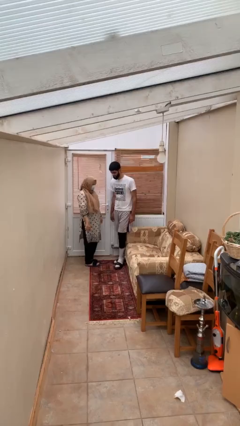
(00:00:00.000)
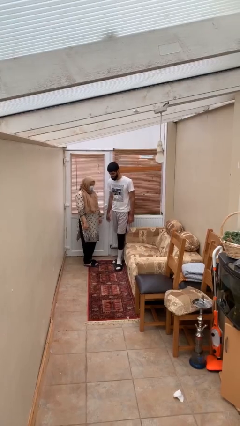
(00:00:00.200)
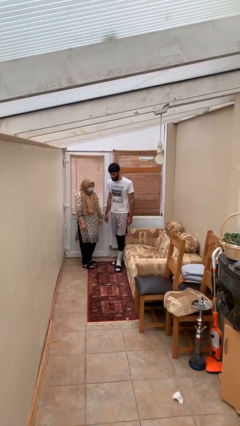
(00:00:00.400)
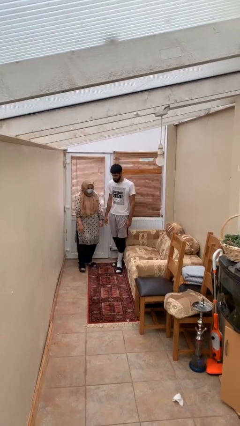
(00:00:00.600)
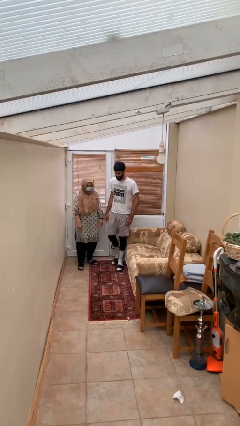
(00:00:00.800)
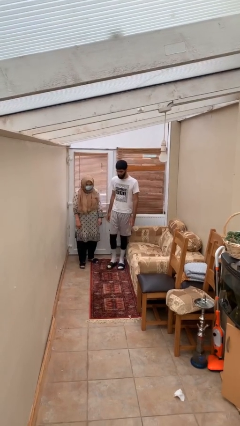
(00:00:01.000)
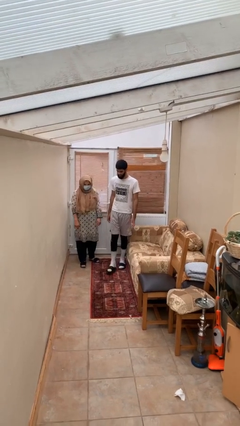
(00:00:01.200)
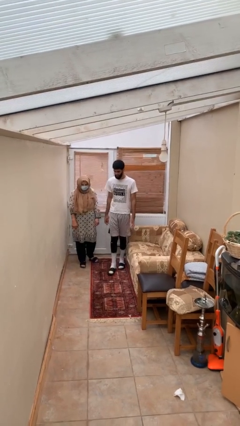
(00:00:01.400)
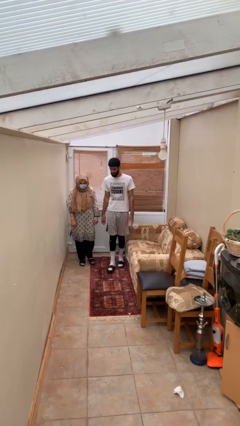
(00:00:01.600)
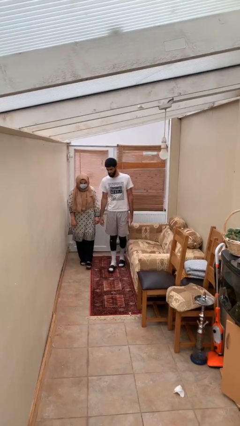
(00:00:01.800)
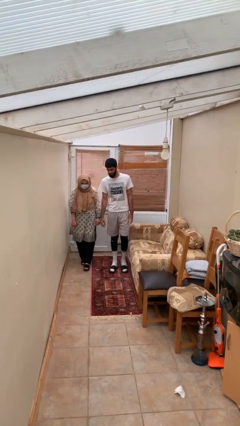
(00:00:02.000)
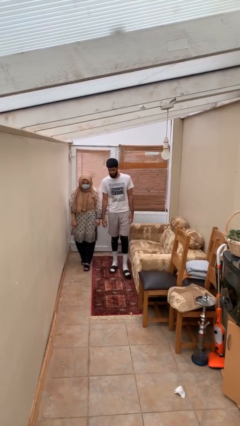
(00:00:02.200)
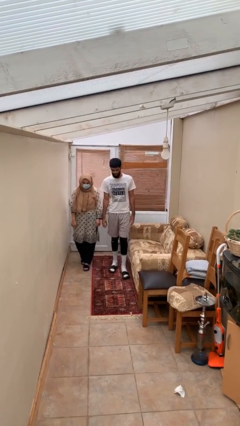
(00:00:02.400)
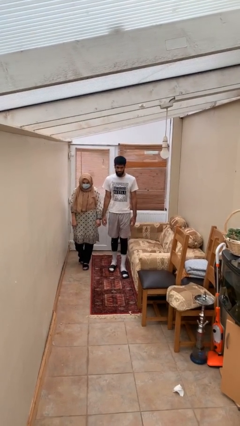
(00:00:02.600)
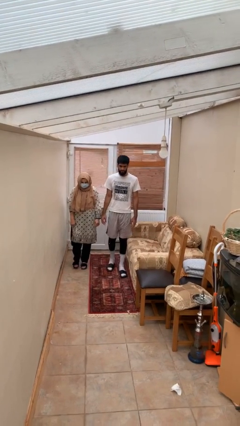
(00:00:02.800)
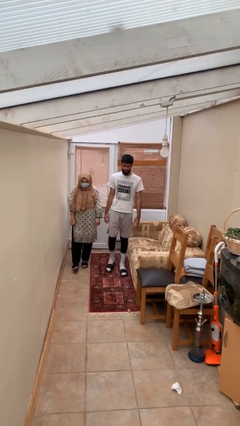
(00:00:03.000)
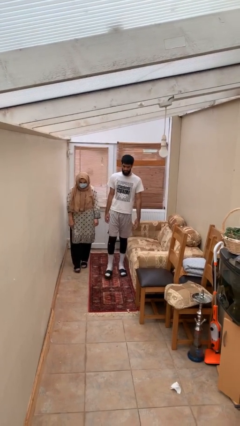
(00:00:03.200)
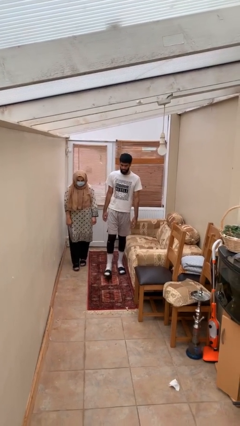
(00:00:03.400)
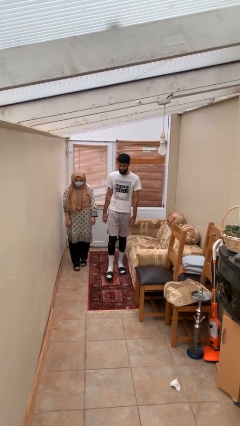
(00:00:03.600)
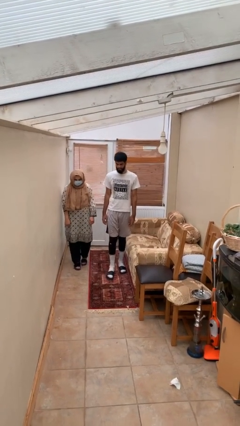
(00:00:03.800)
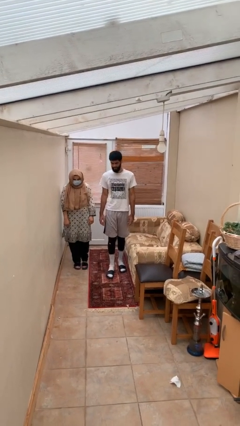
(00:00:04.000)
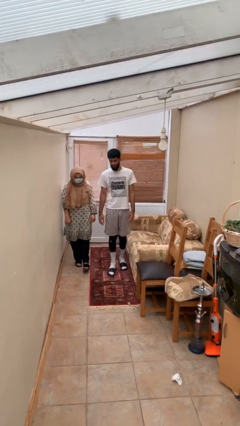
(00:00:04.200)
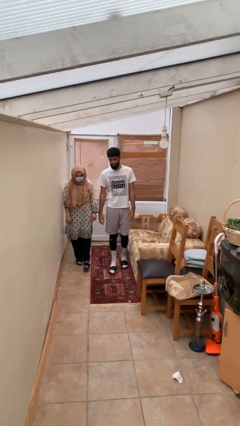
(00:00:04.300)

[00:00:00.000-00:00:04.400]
person talks to person

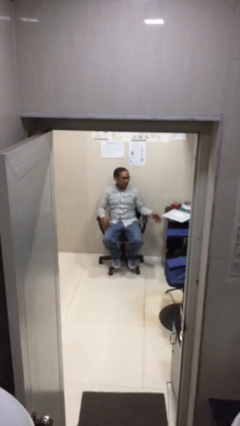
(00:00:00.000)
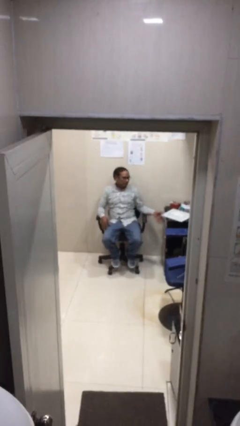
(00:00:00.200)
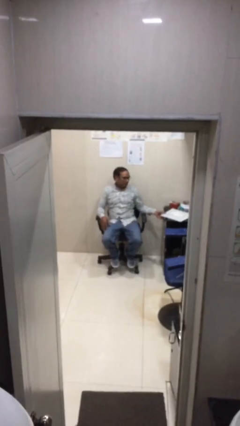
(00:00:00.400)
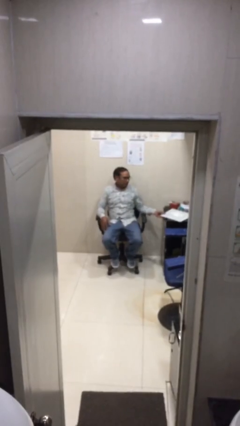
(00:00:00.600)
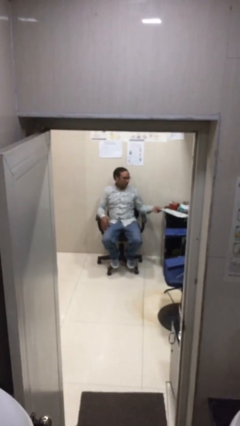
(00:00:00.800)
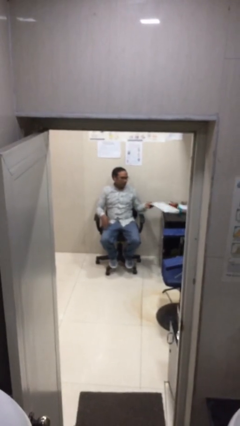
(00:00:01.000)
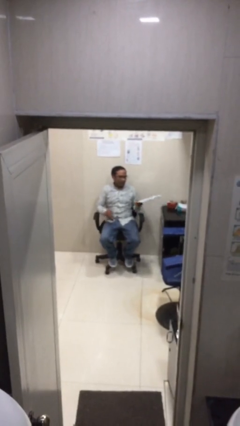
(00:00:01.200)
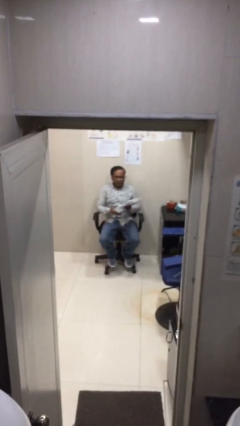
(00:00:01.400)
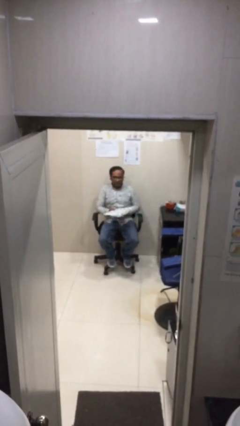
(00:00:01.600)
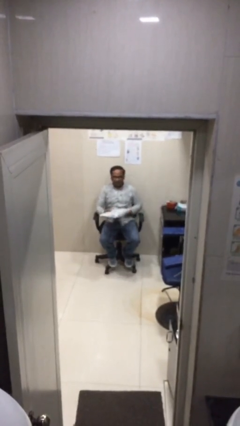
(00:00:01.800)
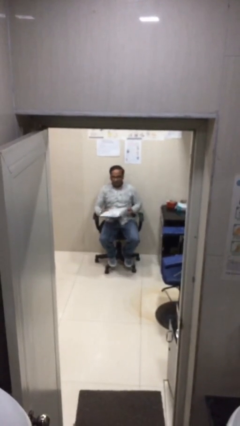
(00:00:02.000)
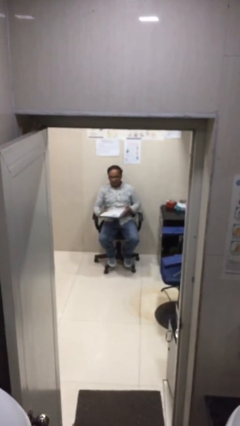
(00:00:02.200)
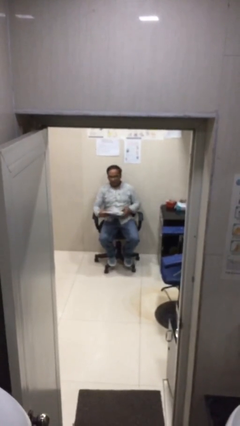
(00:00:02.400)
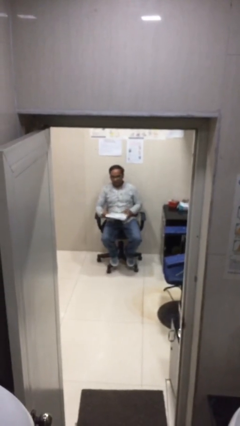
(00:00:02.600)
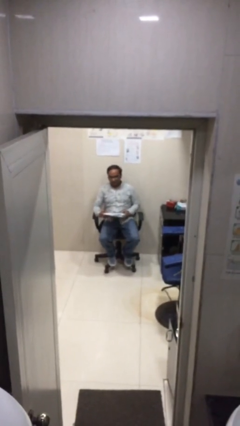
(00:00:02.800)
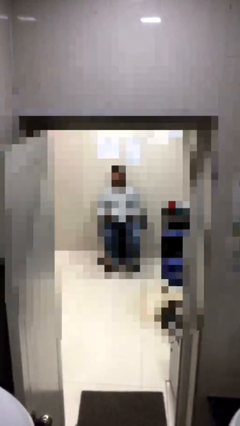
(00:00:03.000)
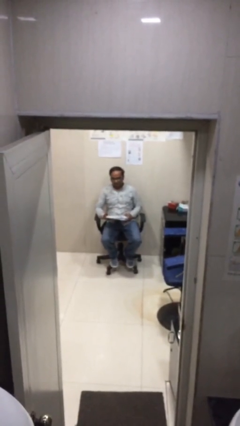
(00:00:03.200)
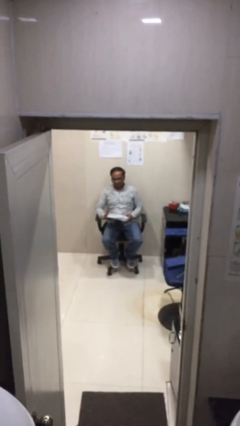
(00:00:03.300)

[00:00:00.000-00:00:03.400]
person picks up object from table

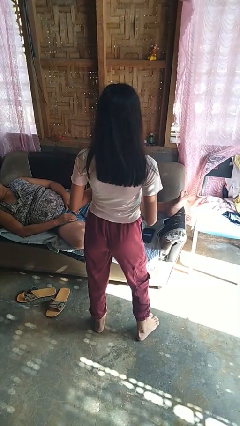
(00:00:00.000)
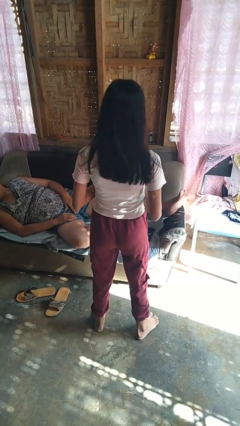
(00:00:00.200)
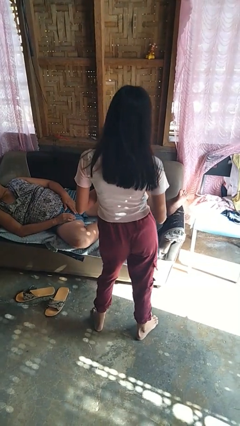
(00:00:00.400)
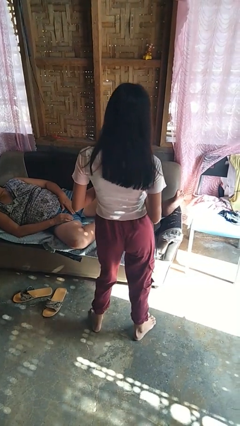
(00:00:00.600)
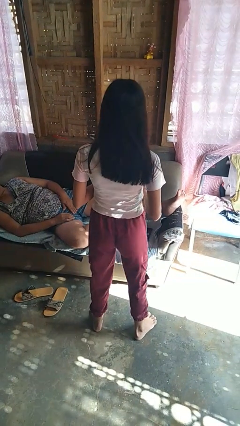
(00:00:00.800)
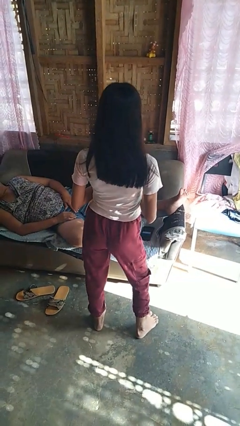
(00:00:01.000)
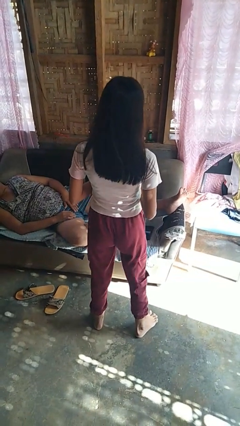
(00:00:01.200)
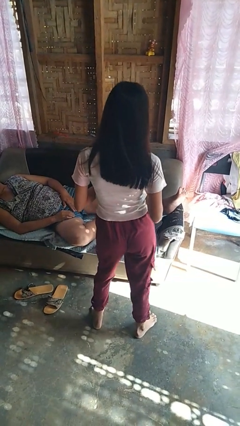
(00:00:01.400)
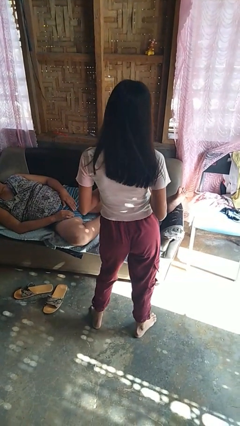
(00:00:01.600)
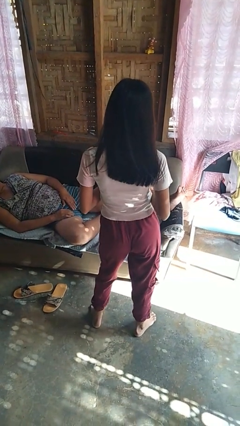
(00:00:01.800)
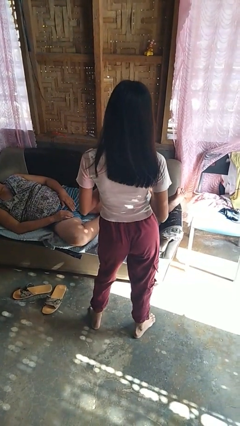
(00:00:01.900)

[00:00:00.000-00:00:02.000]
person wiggles hips

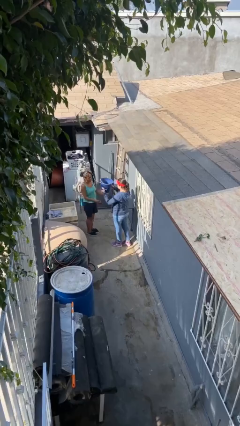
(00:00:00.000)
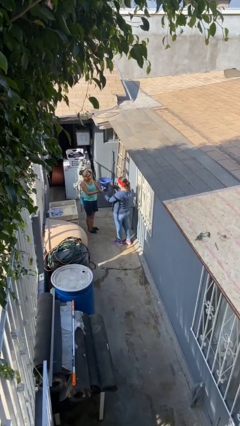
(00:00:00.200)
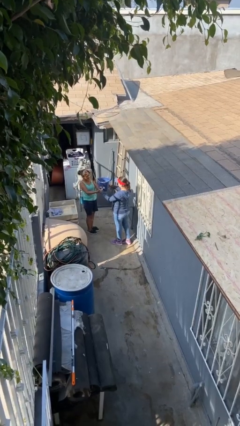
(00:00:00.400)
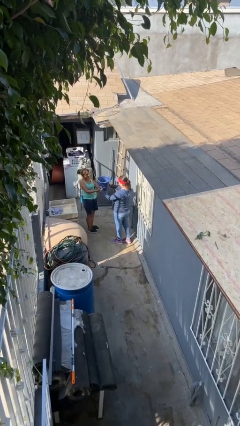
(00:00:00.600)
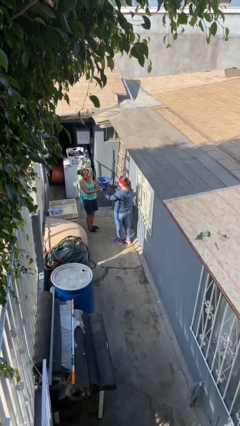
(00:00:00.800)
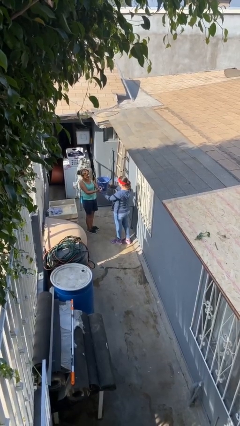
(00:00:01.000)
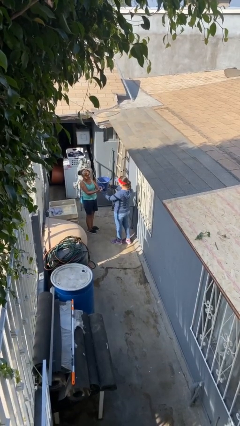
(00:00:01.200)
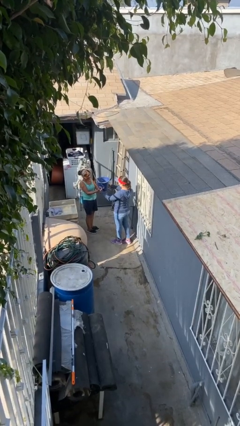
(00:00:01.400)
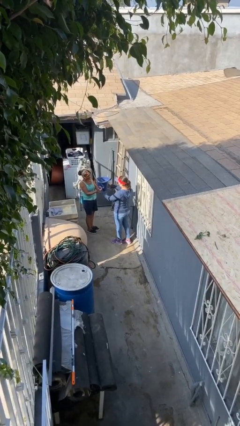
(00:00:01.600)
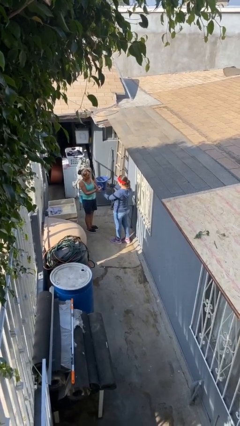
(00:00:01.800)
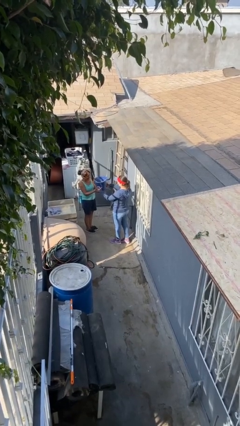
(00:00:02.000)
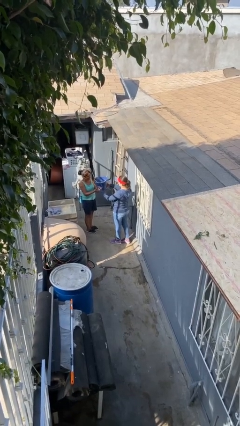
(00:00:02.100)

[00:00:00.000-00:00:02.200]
person transfers object to person

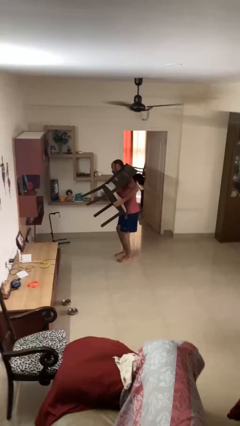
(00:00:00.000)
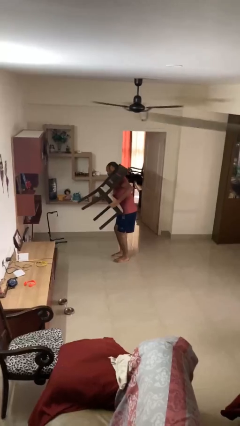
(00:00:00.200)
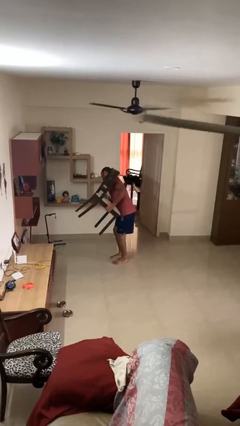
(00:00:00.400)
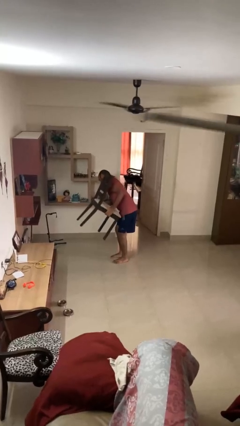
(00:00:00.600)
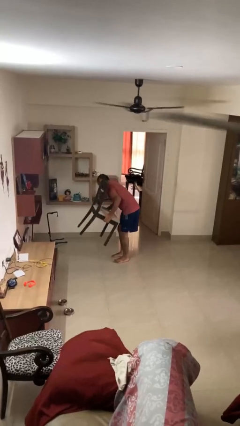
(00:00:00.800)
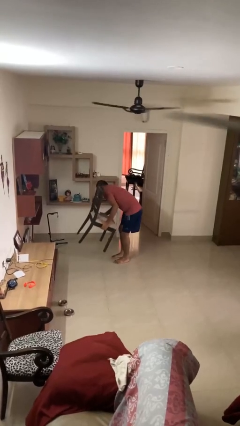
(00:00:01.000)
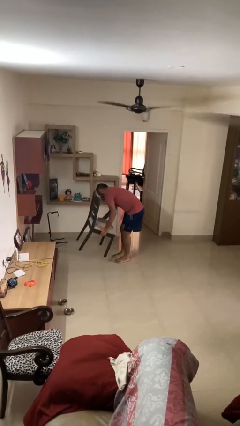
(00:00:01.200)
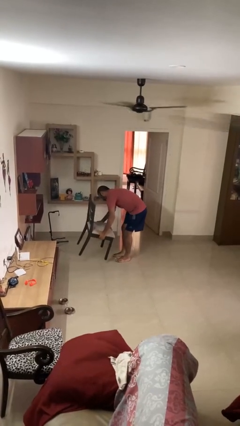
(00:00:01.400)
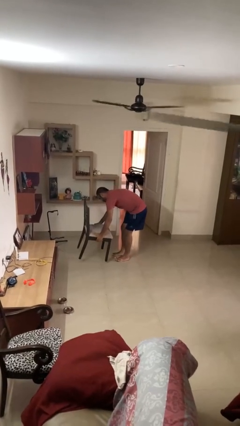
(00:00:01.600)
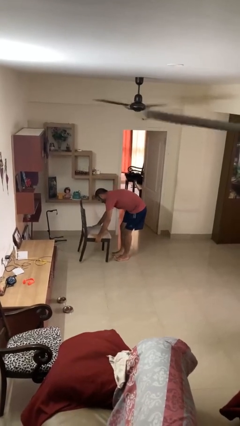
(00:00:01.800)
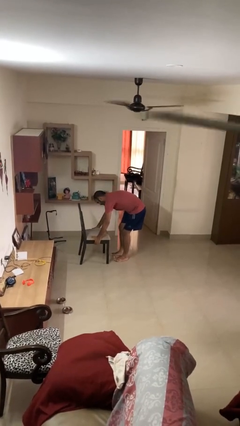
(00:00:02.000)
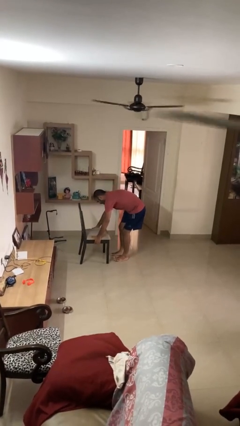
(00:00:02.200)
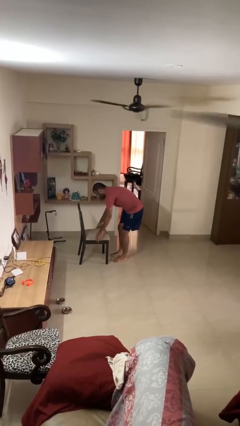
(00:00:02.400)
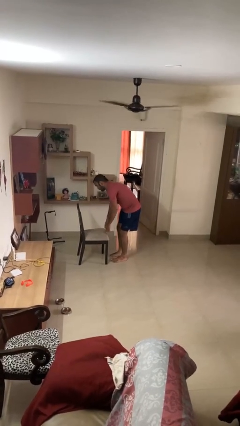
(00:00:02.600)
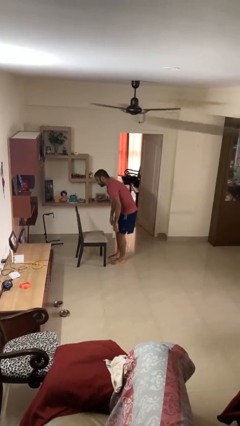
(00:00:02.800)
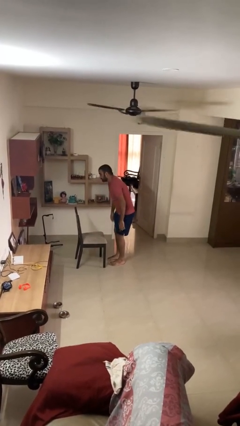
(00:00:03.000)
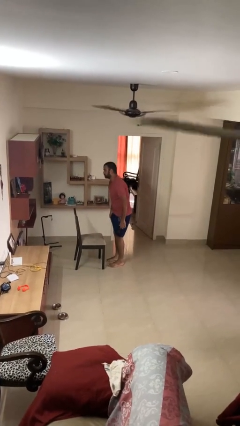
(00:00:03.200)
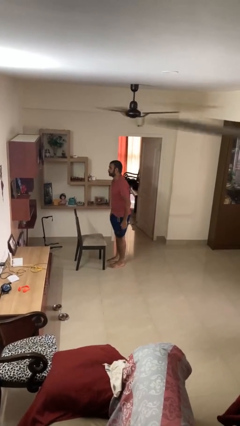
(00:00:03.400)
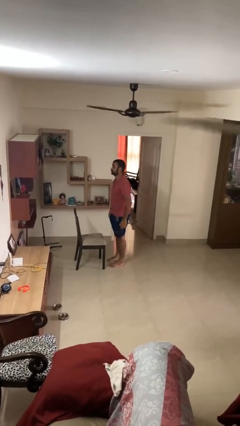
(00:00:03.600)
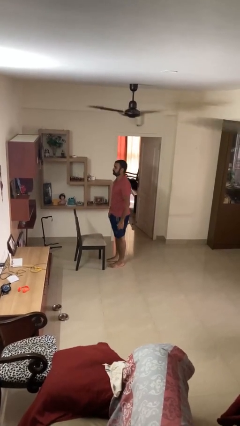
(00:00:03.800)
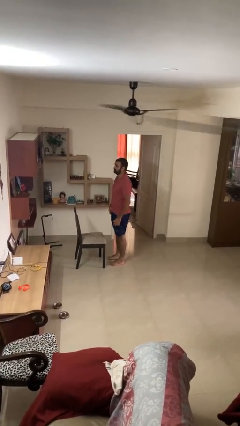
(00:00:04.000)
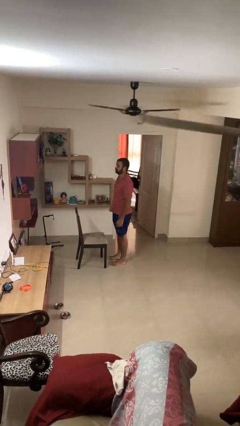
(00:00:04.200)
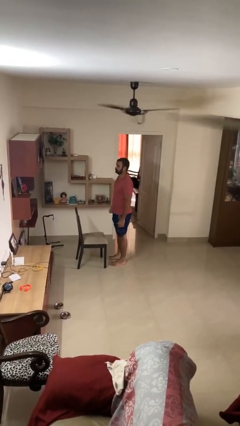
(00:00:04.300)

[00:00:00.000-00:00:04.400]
person puts down object on floor

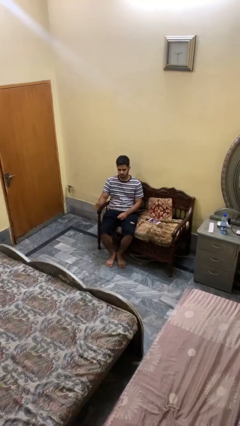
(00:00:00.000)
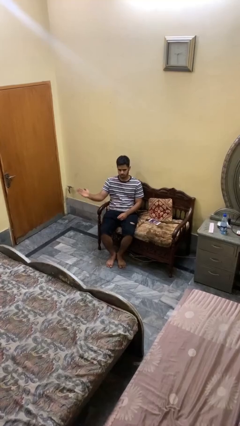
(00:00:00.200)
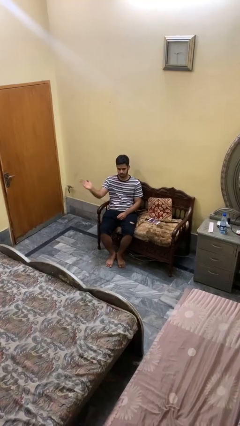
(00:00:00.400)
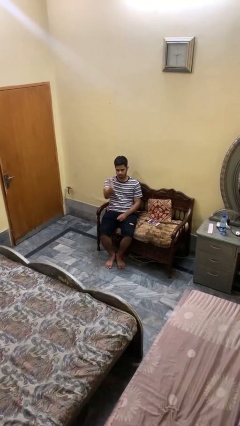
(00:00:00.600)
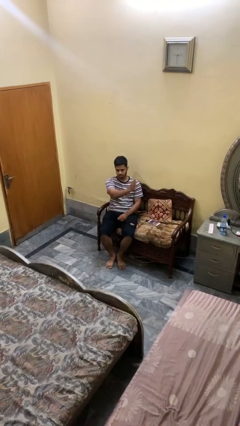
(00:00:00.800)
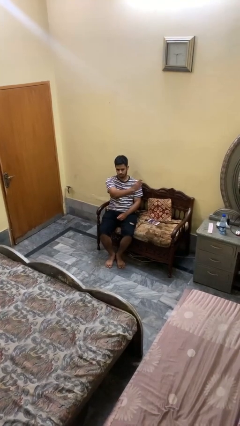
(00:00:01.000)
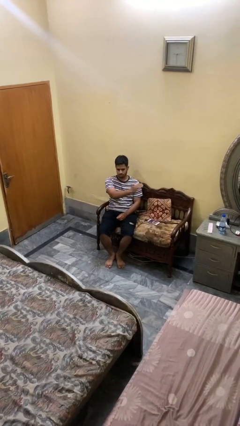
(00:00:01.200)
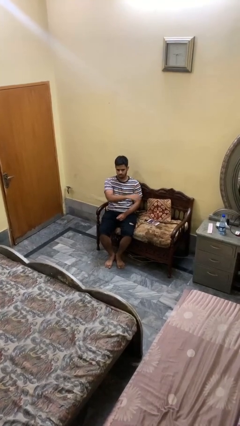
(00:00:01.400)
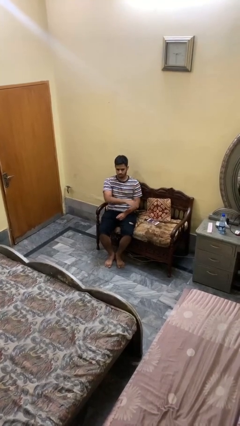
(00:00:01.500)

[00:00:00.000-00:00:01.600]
person gestures swipe left
